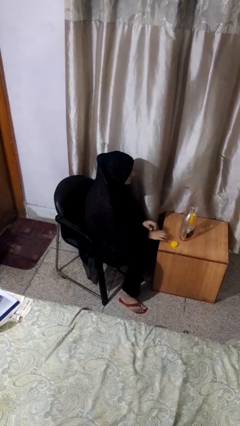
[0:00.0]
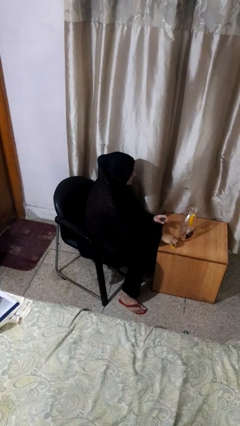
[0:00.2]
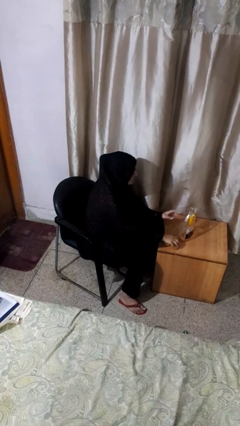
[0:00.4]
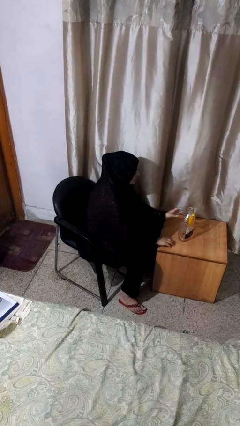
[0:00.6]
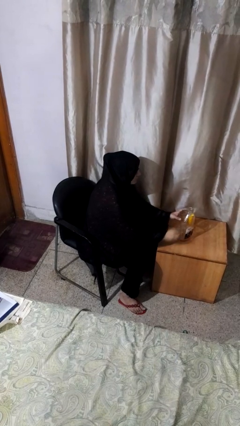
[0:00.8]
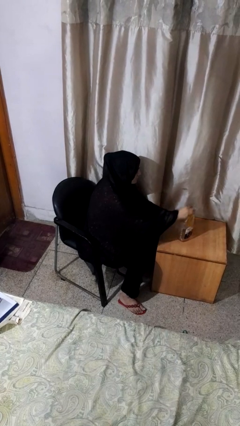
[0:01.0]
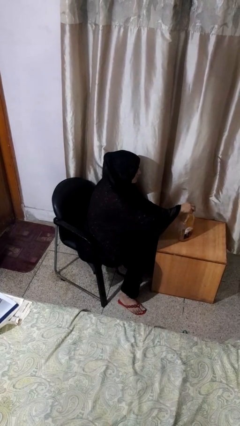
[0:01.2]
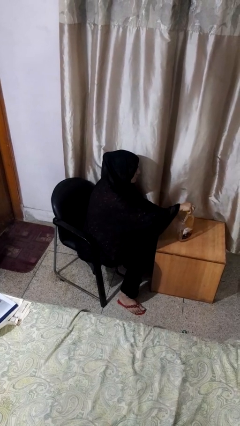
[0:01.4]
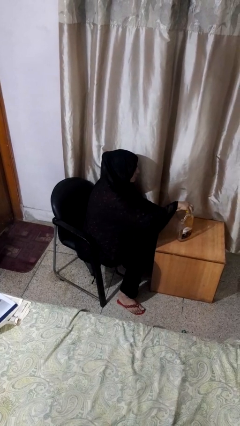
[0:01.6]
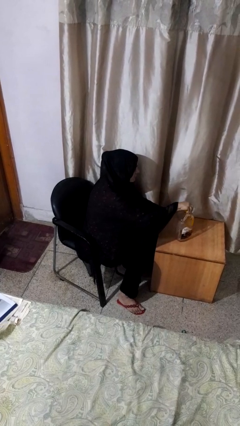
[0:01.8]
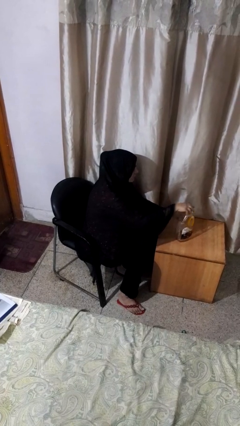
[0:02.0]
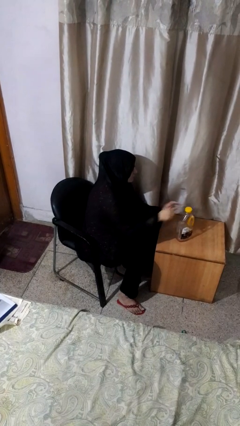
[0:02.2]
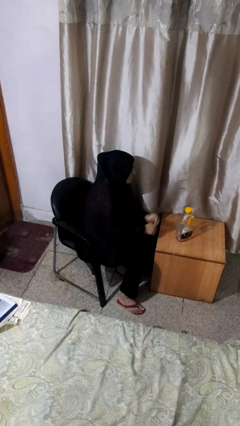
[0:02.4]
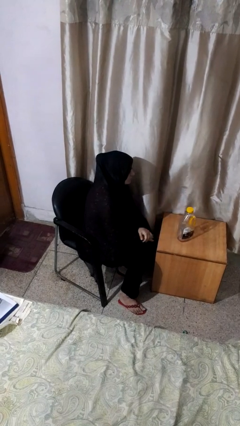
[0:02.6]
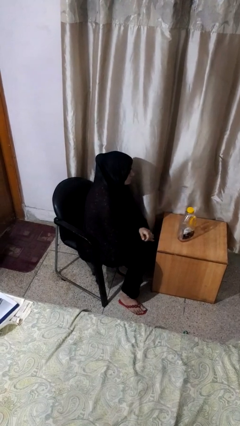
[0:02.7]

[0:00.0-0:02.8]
person screws lid to bottle

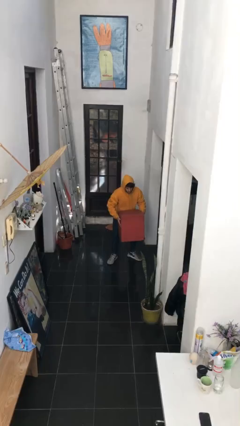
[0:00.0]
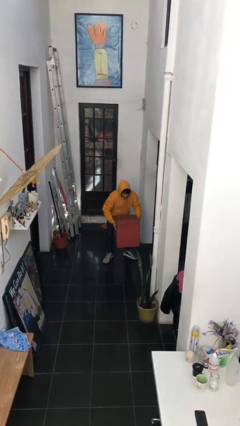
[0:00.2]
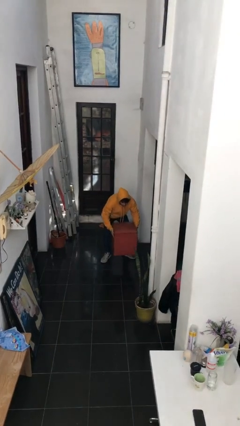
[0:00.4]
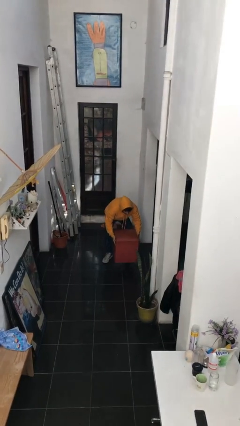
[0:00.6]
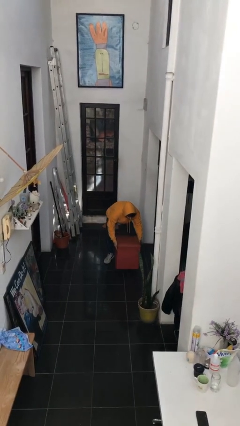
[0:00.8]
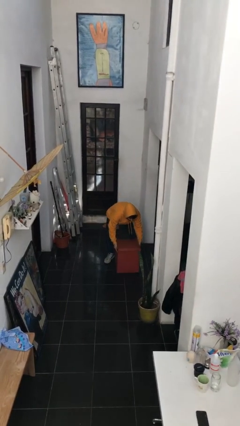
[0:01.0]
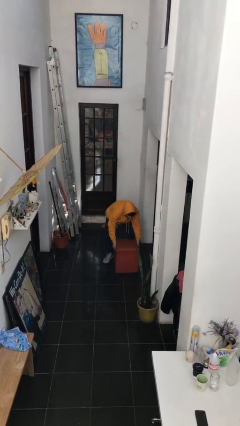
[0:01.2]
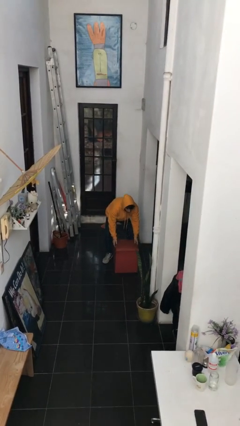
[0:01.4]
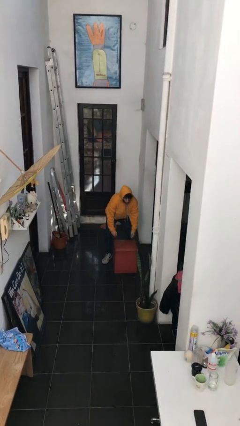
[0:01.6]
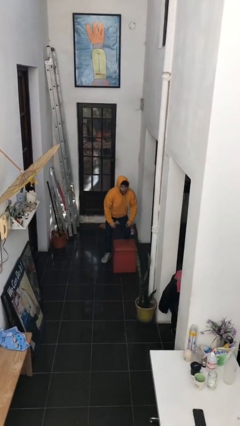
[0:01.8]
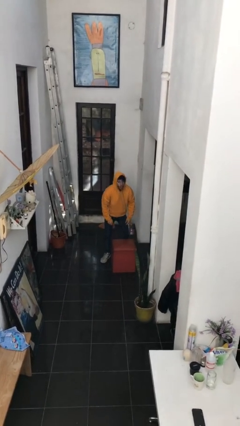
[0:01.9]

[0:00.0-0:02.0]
person puts down object on floor

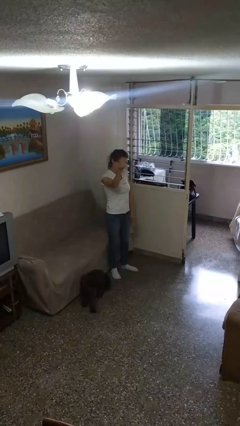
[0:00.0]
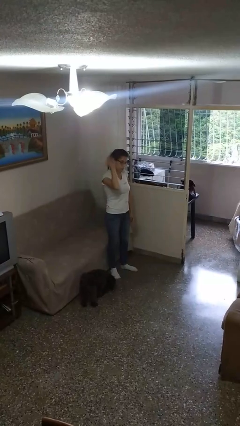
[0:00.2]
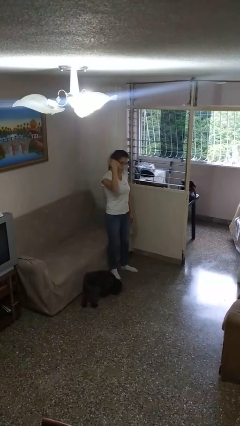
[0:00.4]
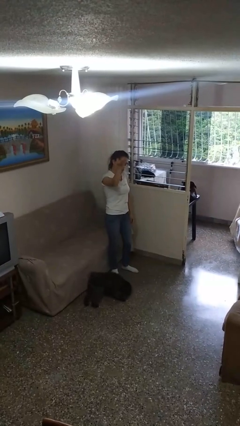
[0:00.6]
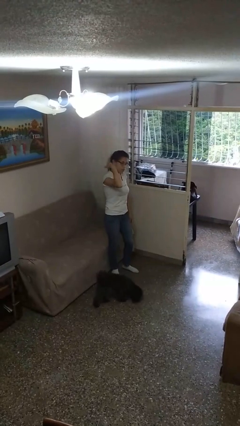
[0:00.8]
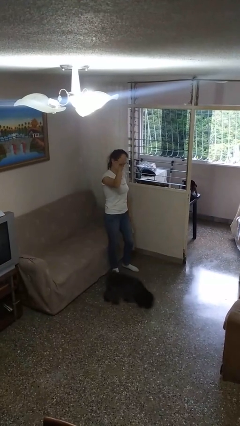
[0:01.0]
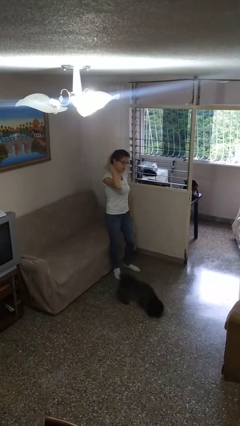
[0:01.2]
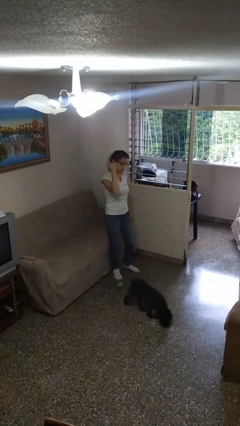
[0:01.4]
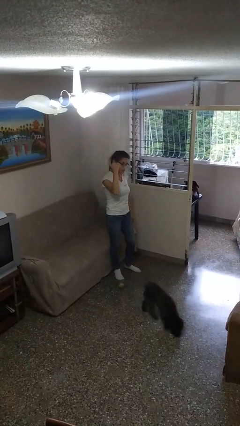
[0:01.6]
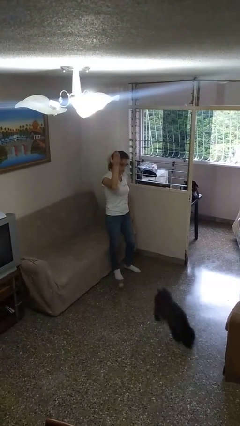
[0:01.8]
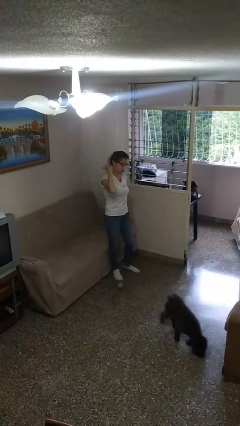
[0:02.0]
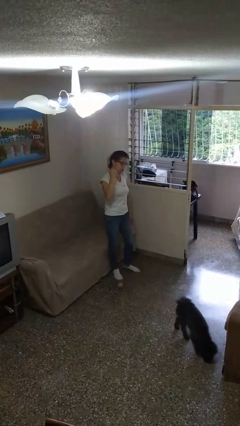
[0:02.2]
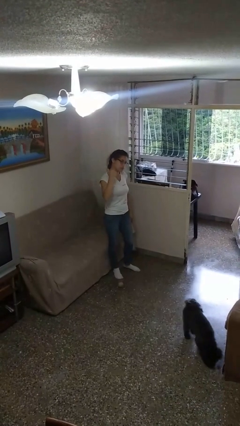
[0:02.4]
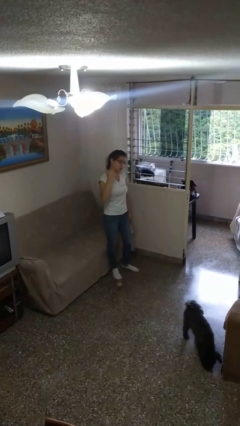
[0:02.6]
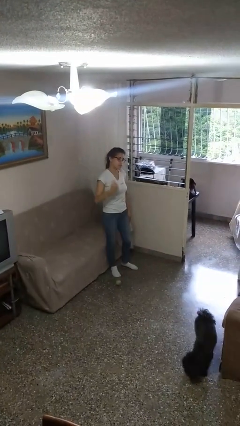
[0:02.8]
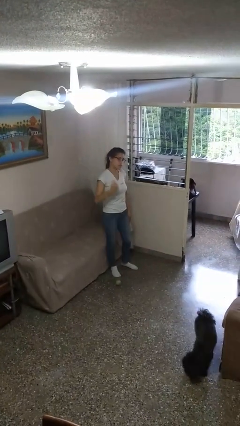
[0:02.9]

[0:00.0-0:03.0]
person gestures come here

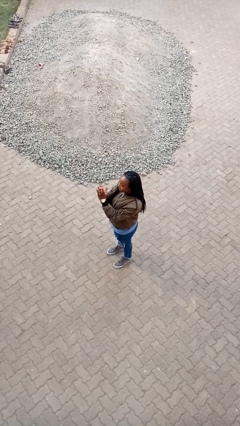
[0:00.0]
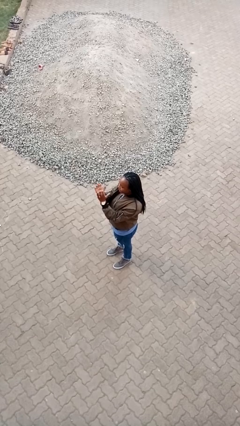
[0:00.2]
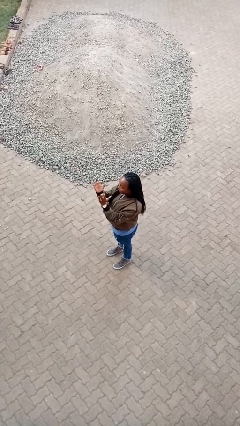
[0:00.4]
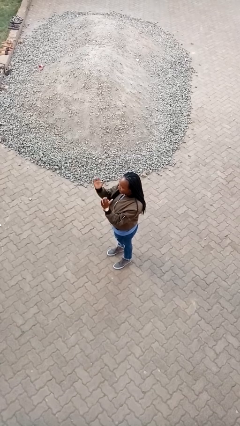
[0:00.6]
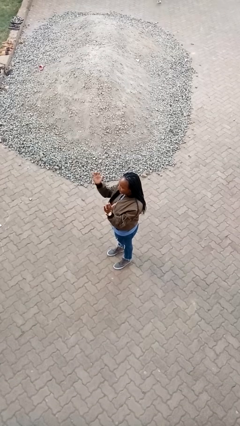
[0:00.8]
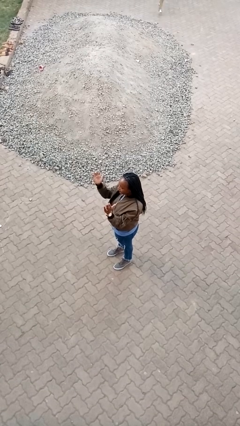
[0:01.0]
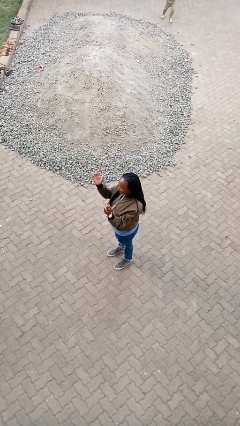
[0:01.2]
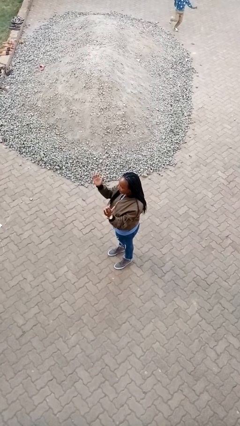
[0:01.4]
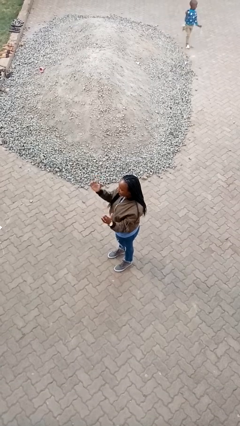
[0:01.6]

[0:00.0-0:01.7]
person gestures zoom out

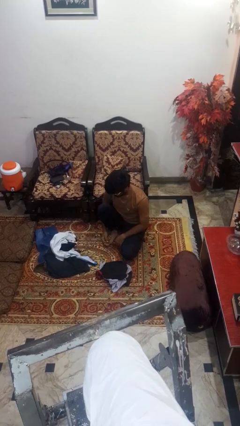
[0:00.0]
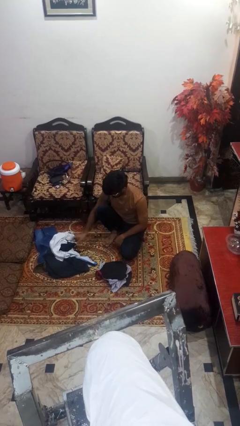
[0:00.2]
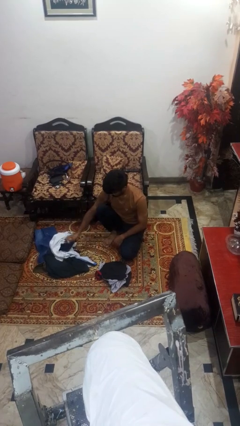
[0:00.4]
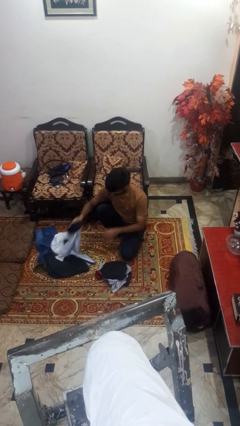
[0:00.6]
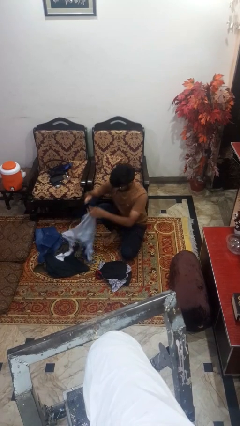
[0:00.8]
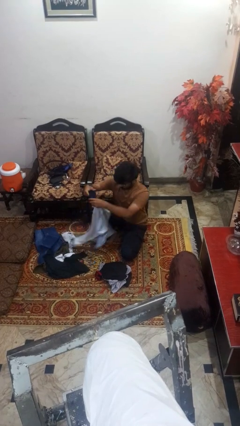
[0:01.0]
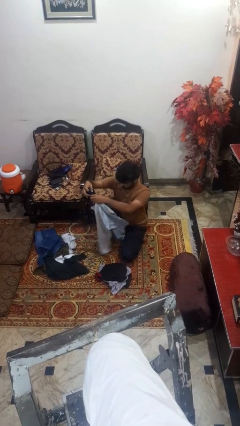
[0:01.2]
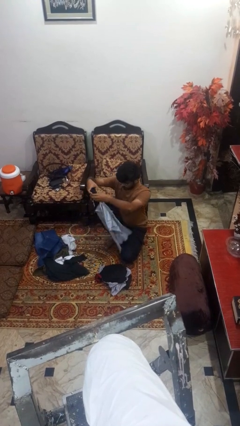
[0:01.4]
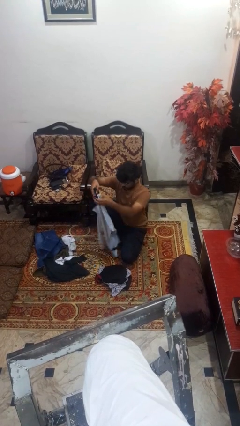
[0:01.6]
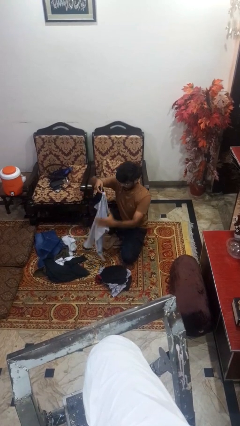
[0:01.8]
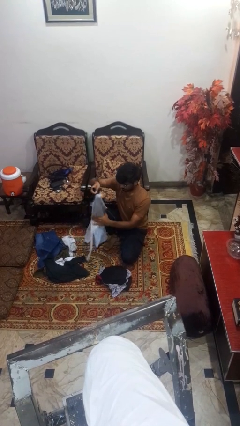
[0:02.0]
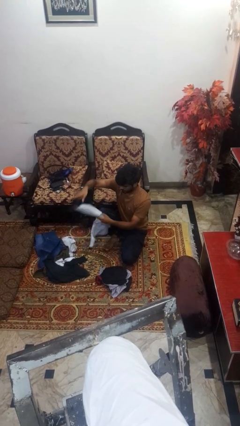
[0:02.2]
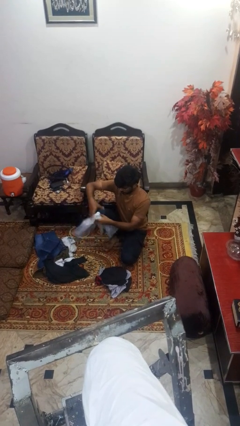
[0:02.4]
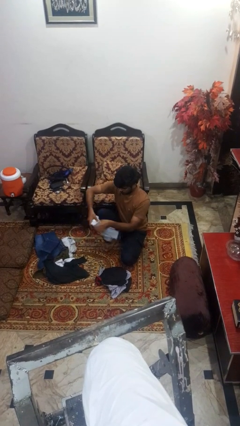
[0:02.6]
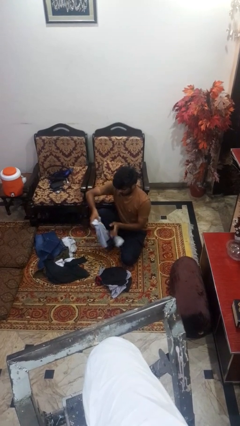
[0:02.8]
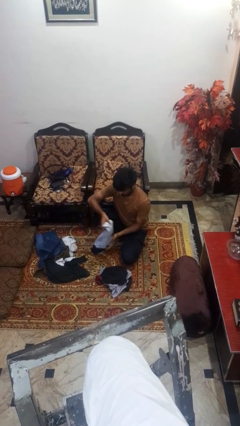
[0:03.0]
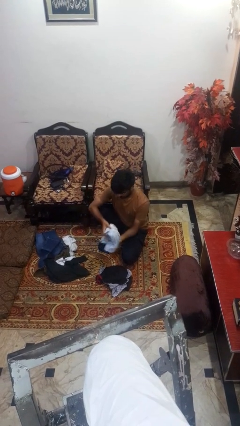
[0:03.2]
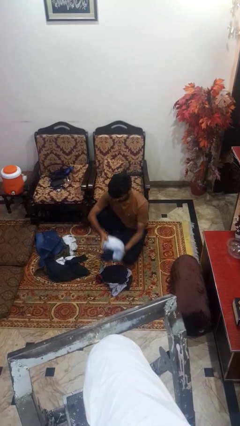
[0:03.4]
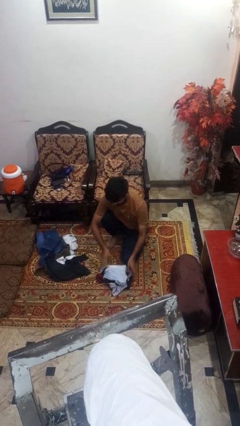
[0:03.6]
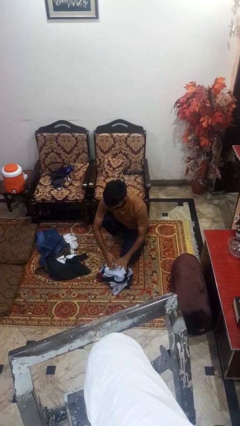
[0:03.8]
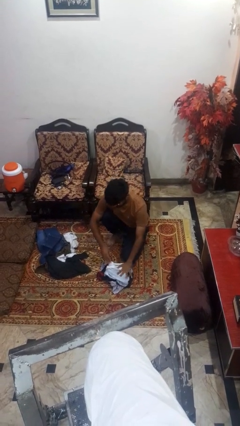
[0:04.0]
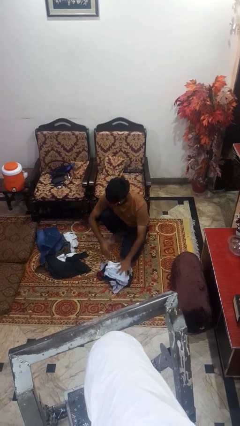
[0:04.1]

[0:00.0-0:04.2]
person folds shirt

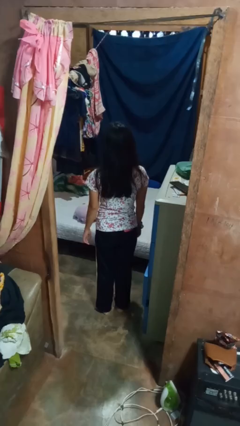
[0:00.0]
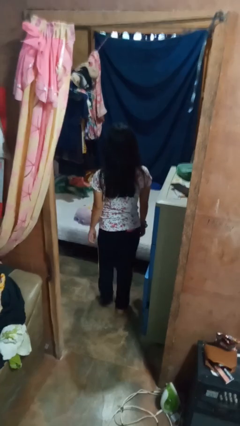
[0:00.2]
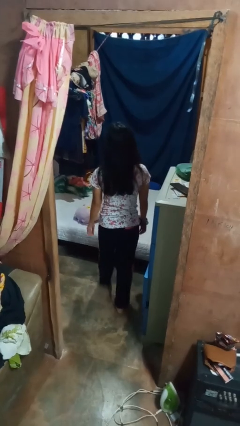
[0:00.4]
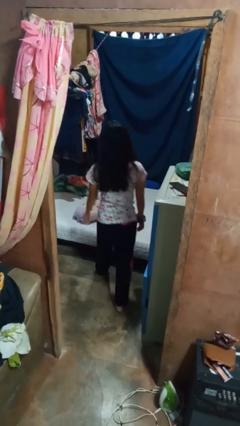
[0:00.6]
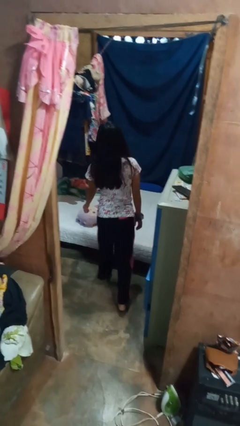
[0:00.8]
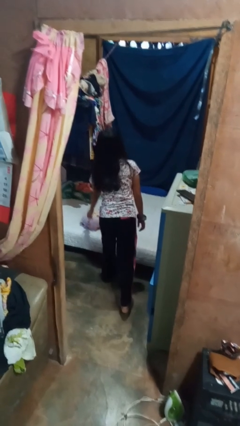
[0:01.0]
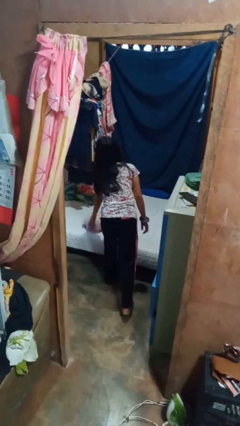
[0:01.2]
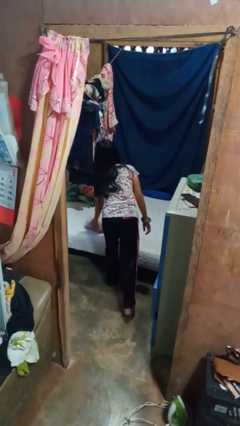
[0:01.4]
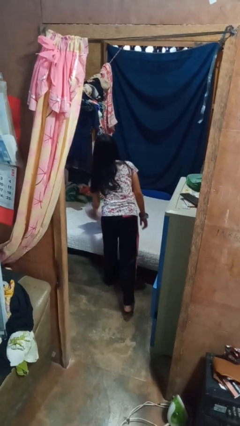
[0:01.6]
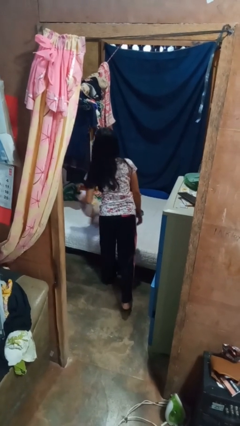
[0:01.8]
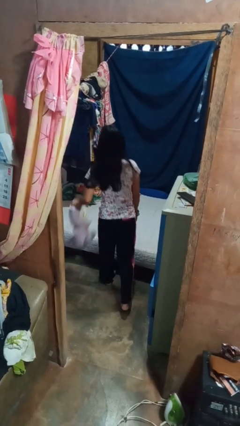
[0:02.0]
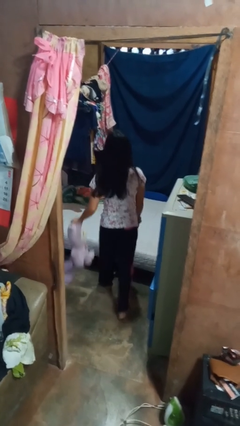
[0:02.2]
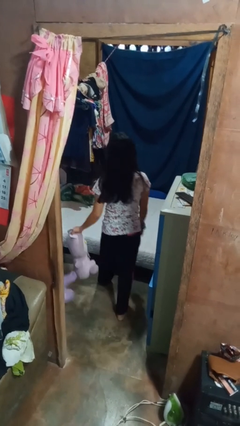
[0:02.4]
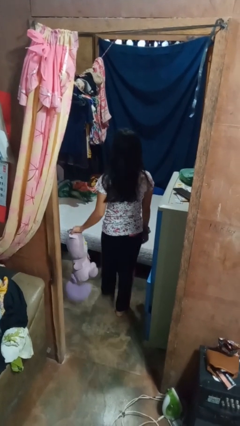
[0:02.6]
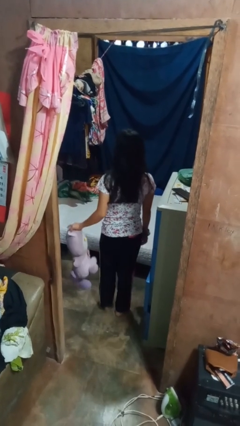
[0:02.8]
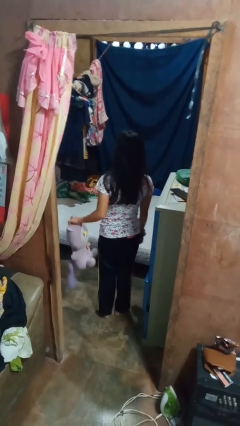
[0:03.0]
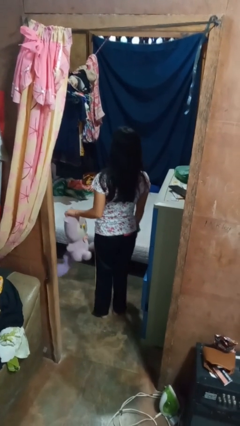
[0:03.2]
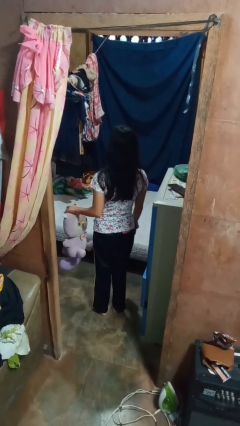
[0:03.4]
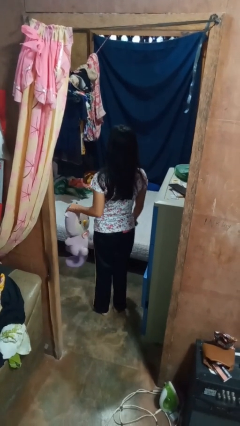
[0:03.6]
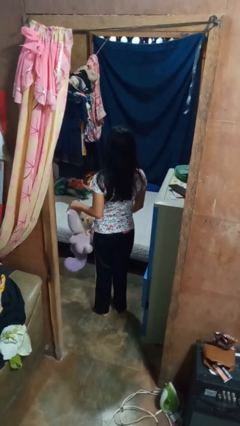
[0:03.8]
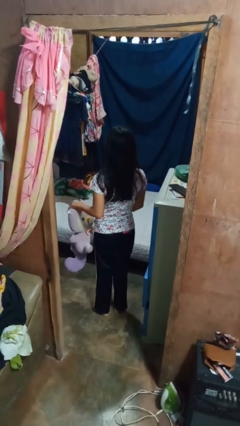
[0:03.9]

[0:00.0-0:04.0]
person picks up object from bed
